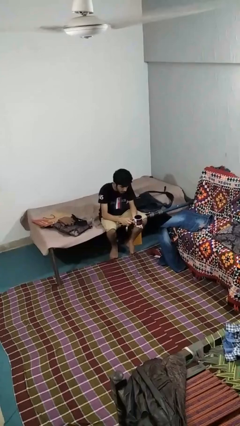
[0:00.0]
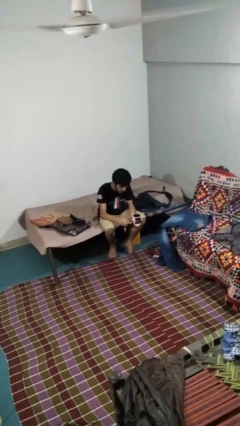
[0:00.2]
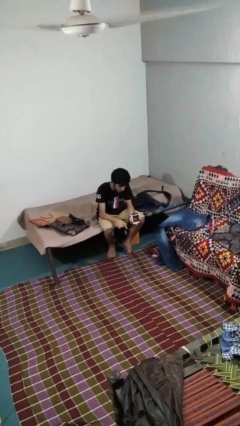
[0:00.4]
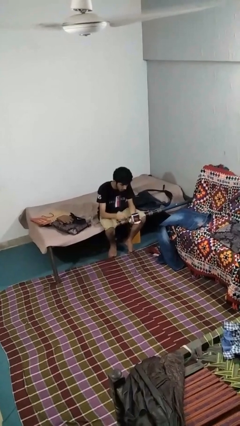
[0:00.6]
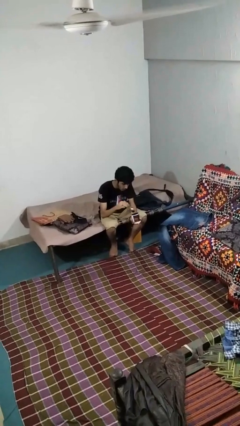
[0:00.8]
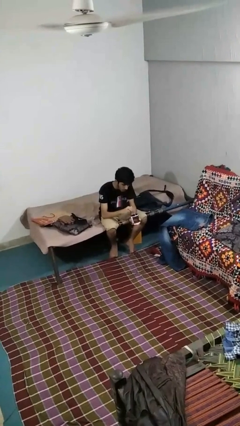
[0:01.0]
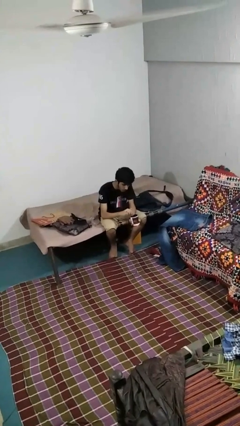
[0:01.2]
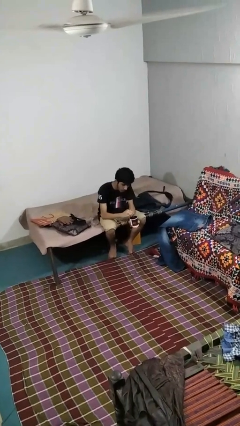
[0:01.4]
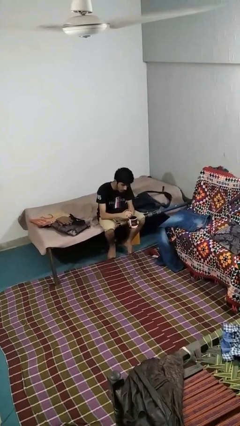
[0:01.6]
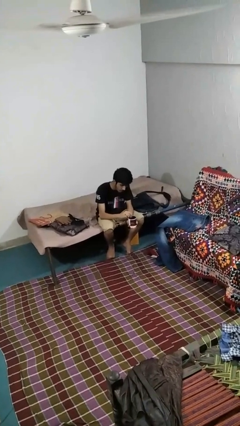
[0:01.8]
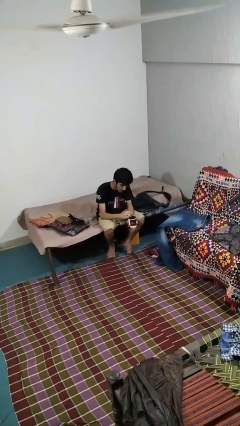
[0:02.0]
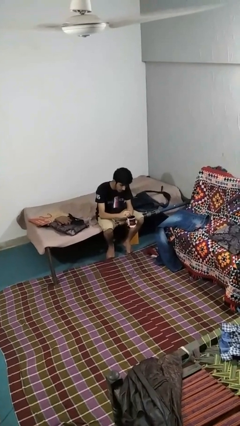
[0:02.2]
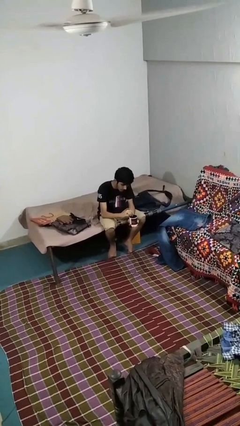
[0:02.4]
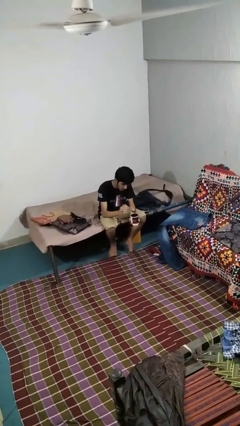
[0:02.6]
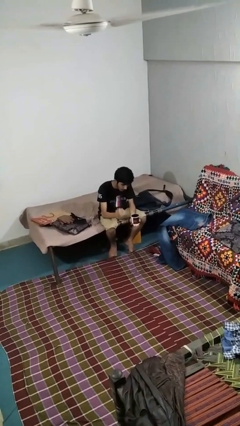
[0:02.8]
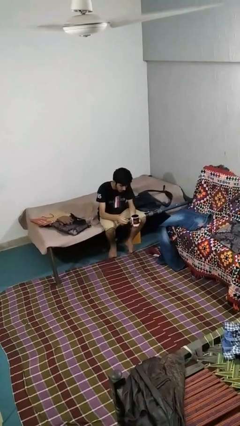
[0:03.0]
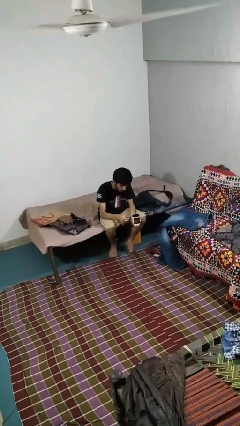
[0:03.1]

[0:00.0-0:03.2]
person stirs mug

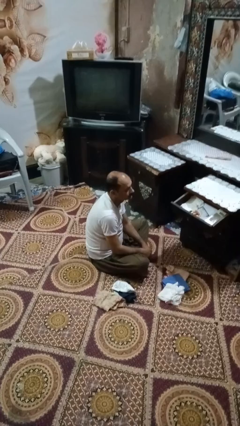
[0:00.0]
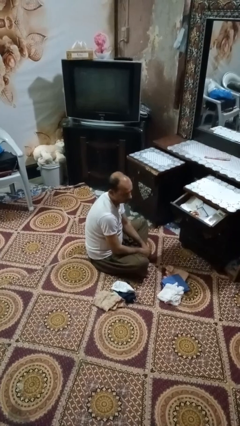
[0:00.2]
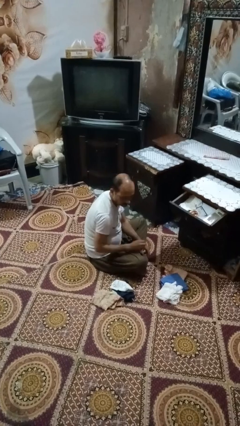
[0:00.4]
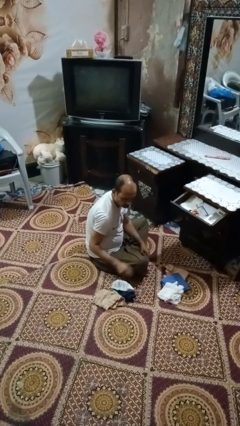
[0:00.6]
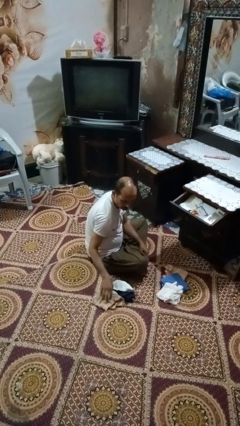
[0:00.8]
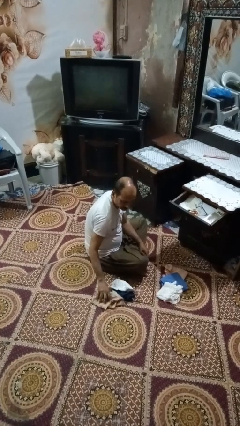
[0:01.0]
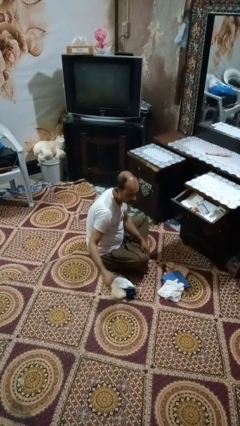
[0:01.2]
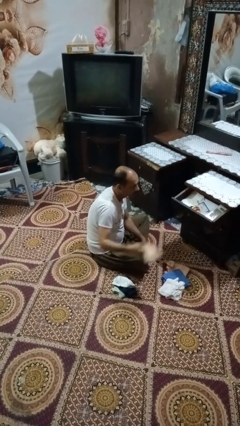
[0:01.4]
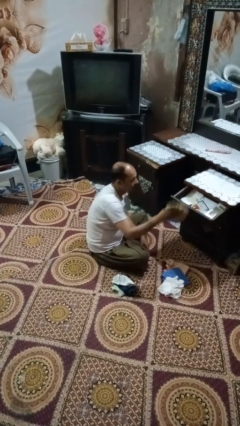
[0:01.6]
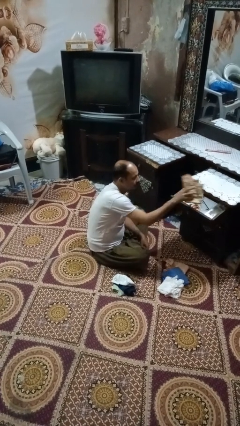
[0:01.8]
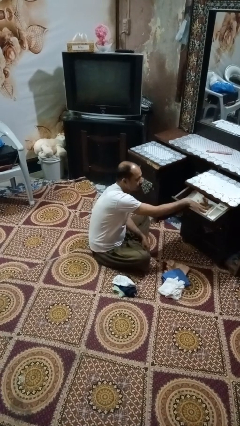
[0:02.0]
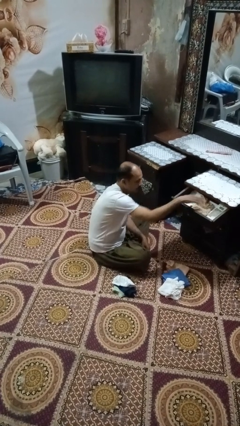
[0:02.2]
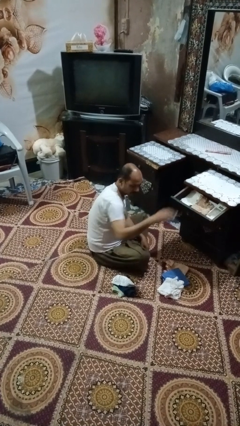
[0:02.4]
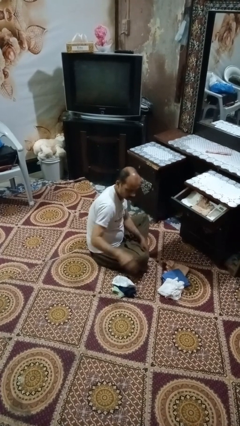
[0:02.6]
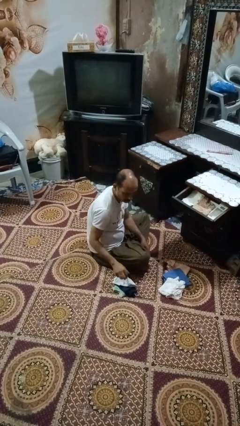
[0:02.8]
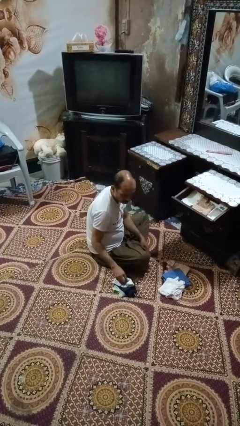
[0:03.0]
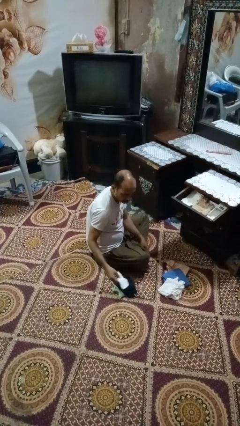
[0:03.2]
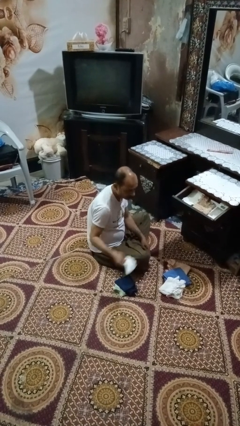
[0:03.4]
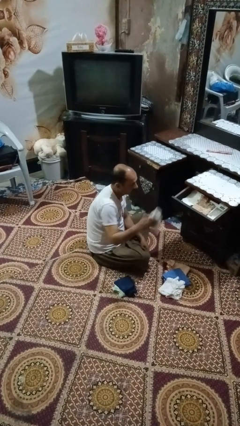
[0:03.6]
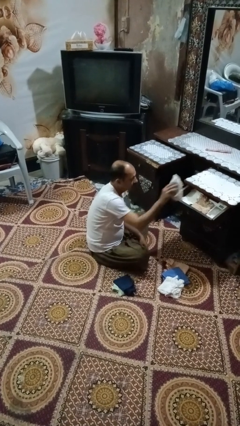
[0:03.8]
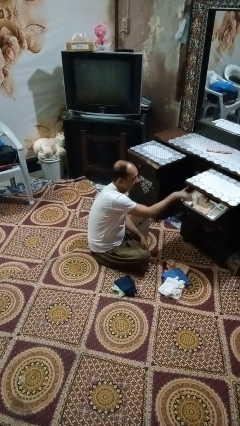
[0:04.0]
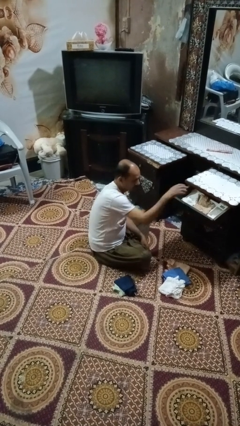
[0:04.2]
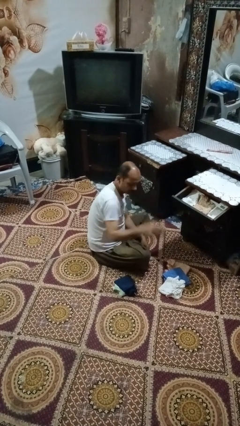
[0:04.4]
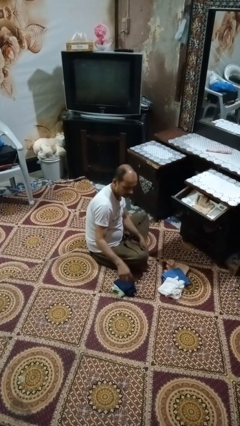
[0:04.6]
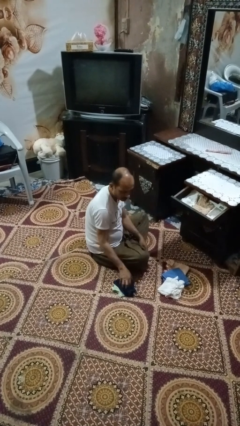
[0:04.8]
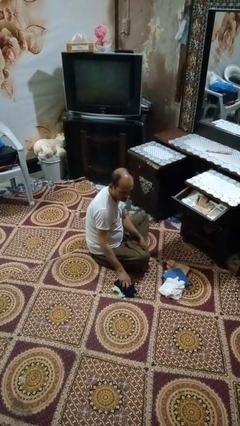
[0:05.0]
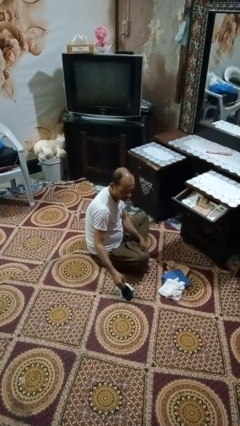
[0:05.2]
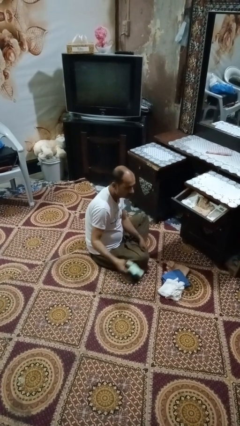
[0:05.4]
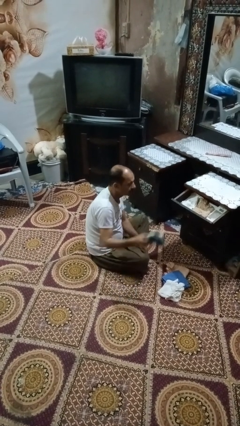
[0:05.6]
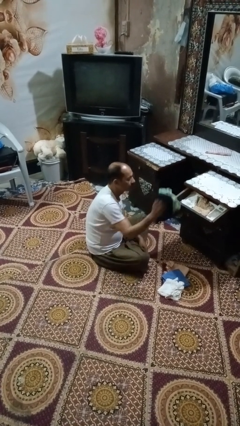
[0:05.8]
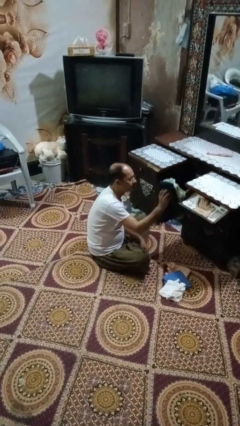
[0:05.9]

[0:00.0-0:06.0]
person puts clothes into dresser

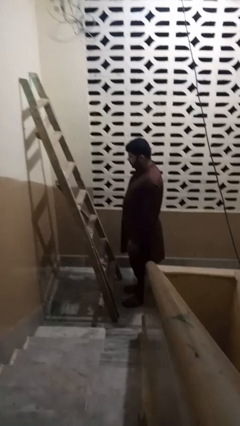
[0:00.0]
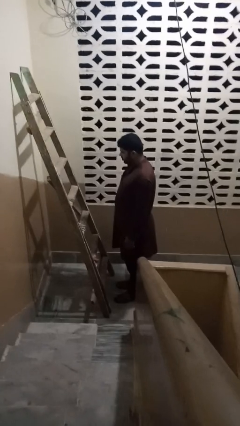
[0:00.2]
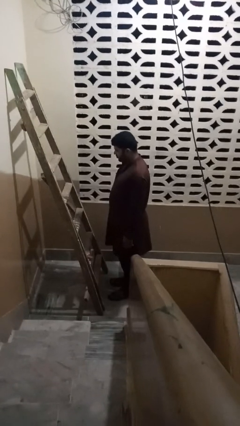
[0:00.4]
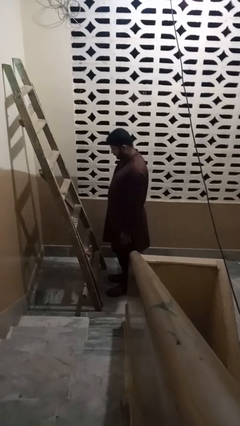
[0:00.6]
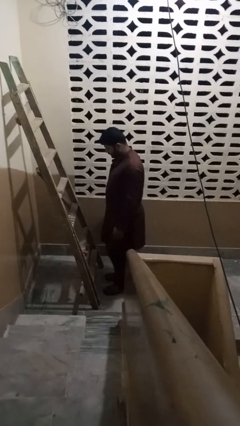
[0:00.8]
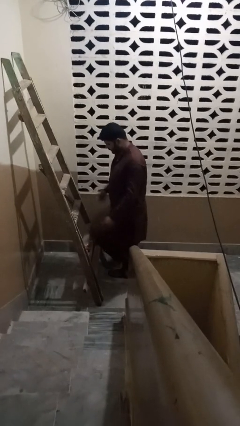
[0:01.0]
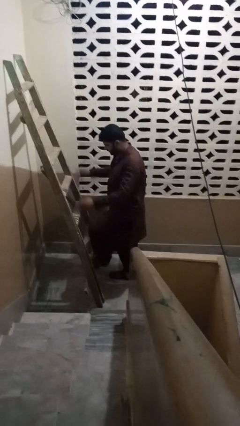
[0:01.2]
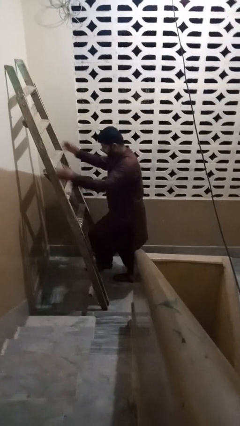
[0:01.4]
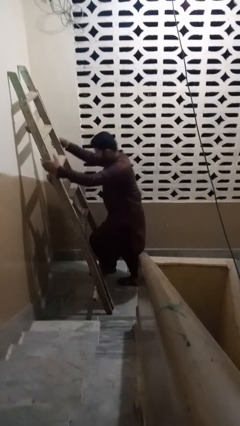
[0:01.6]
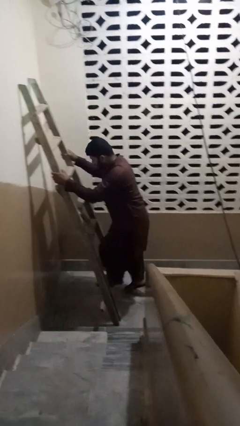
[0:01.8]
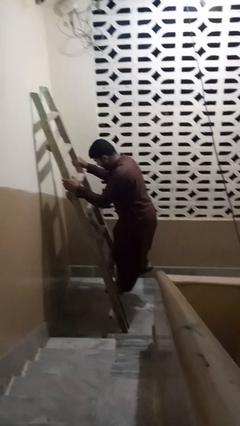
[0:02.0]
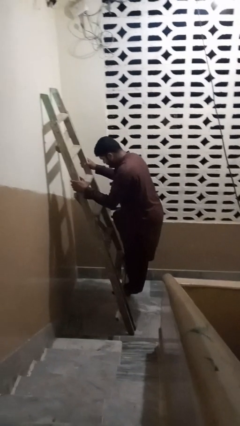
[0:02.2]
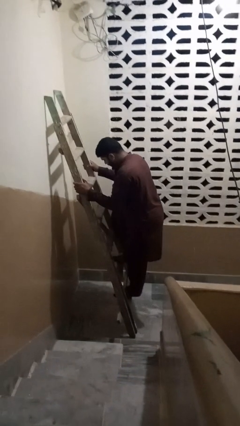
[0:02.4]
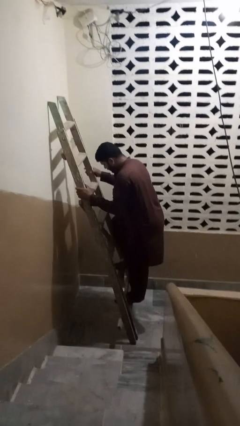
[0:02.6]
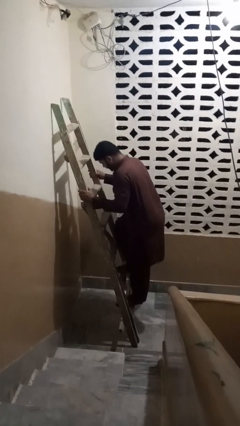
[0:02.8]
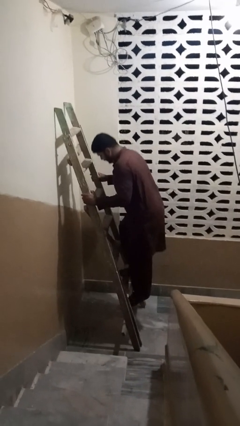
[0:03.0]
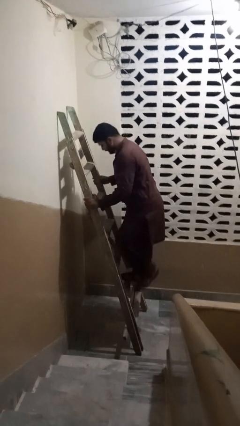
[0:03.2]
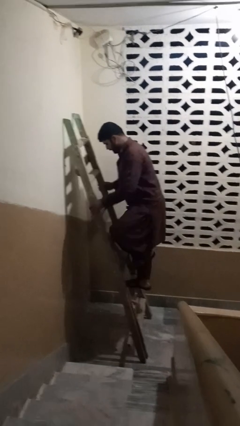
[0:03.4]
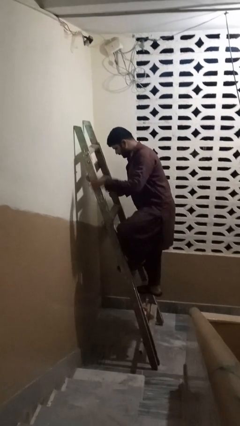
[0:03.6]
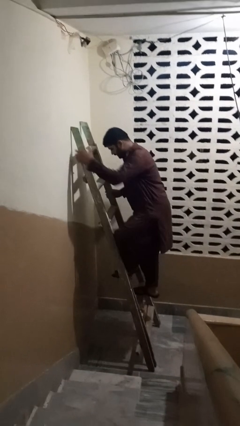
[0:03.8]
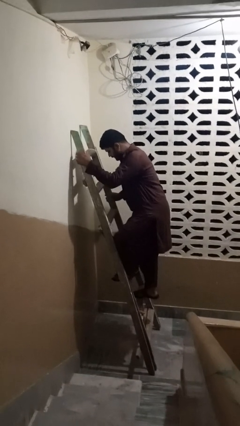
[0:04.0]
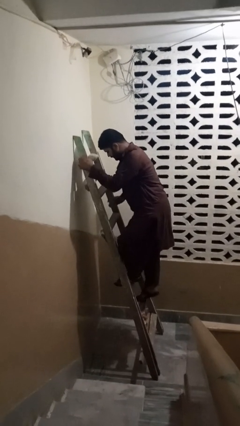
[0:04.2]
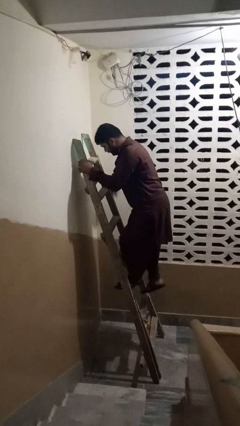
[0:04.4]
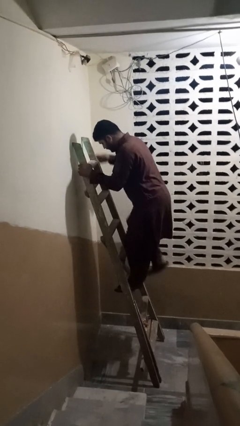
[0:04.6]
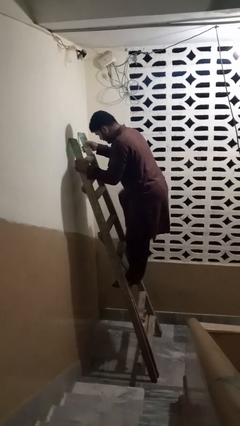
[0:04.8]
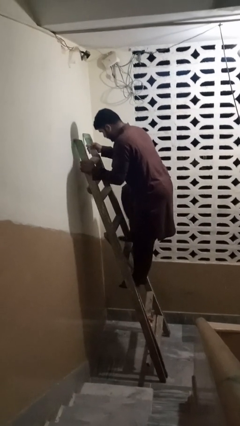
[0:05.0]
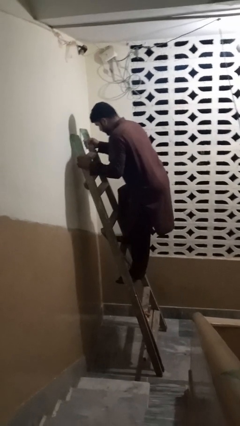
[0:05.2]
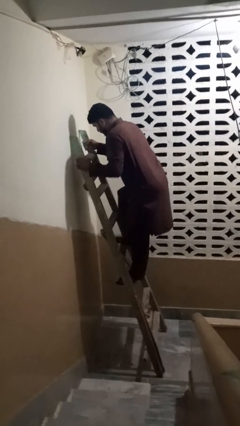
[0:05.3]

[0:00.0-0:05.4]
person climbs up ladder

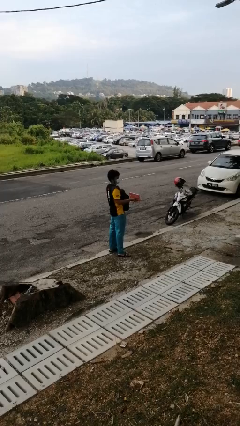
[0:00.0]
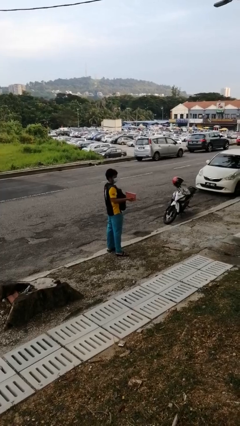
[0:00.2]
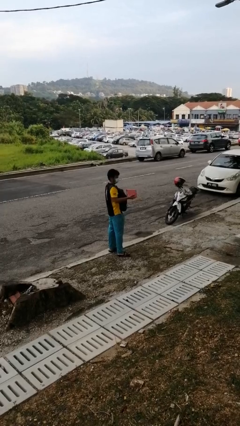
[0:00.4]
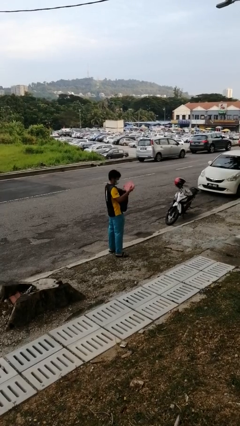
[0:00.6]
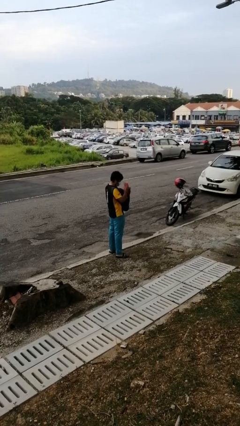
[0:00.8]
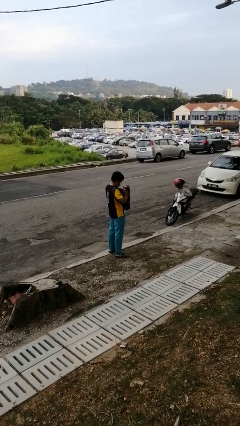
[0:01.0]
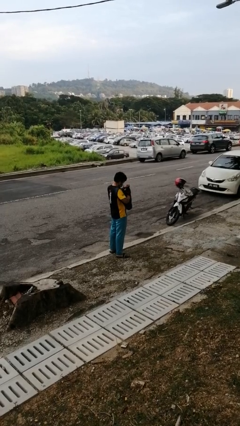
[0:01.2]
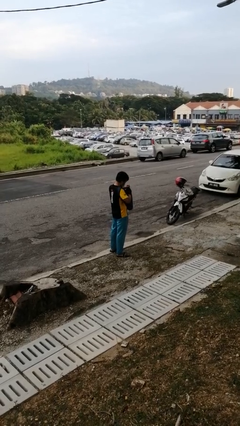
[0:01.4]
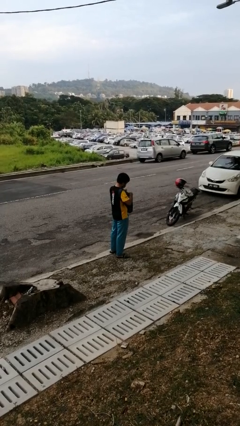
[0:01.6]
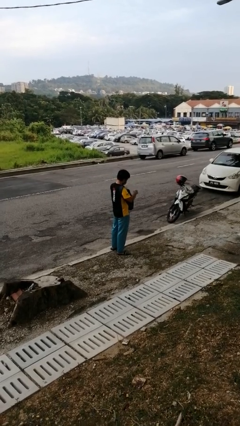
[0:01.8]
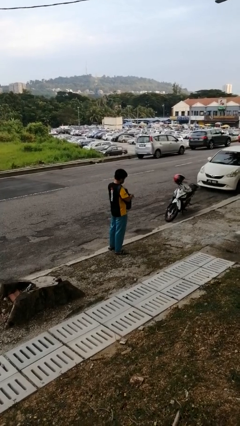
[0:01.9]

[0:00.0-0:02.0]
person puts object into backpack

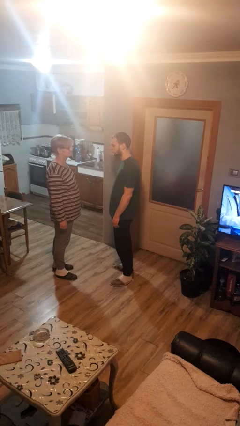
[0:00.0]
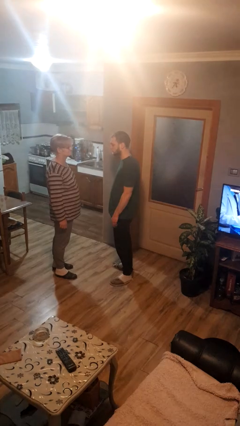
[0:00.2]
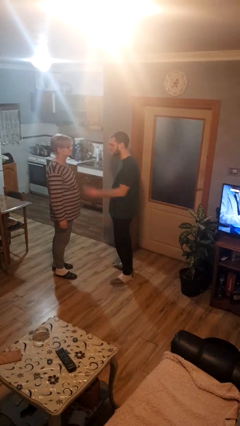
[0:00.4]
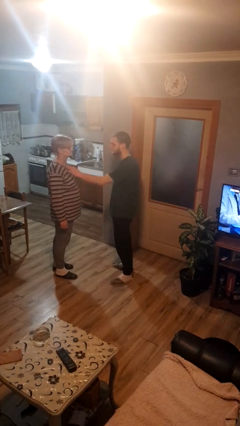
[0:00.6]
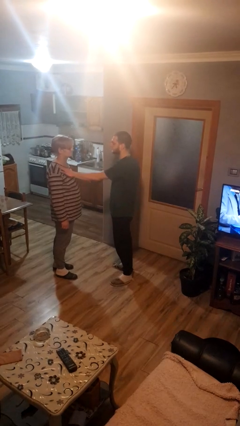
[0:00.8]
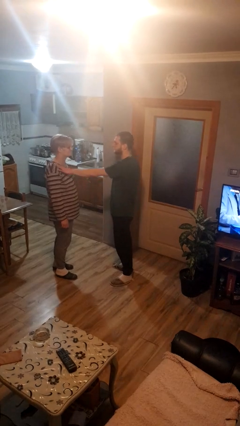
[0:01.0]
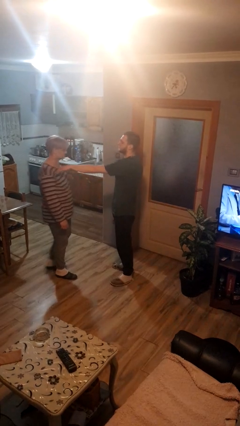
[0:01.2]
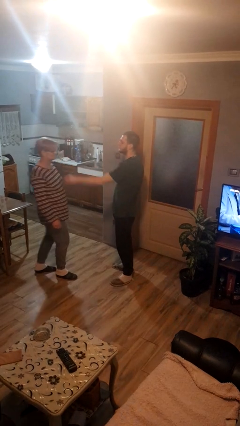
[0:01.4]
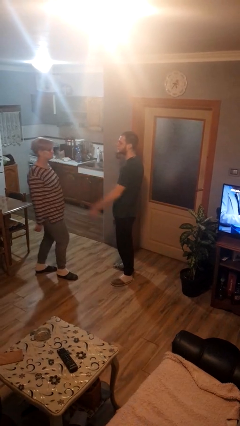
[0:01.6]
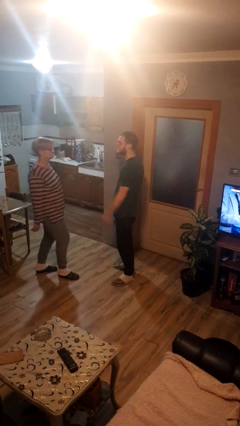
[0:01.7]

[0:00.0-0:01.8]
person shoves person
